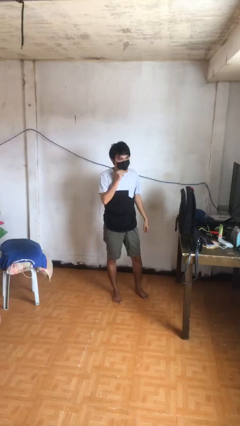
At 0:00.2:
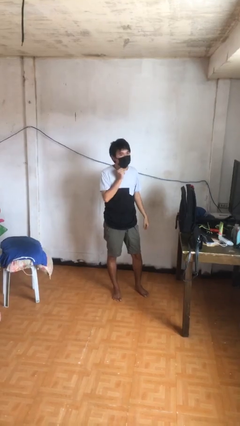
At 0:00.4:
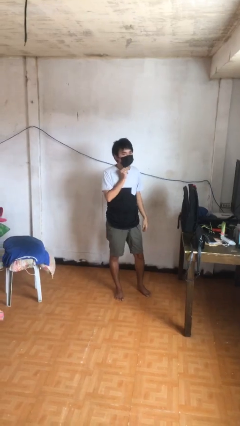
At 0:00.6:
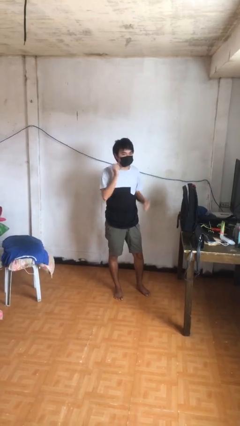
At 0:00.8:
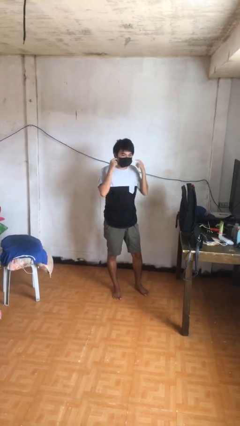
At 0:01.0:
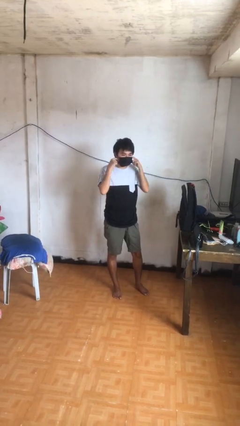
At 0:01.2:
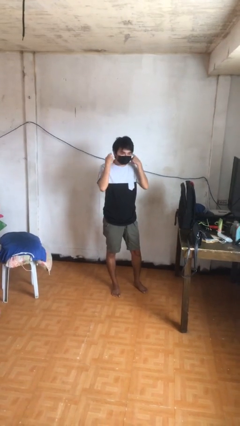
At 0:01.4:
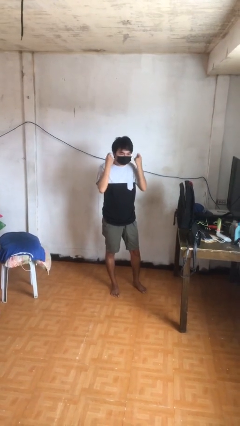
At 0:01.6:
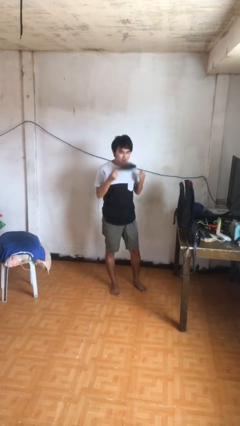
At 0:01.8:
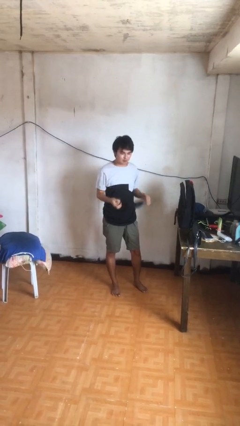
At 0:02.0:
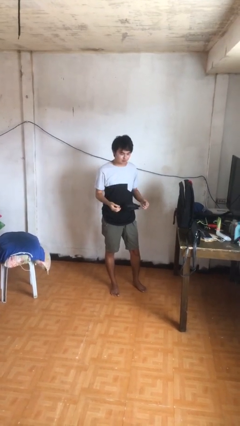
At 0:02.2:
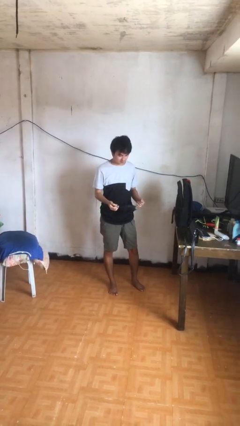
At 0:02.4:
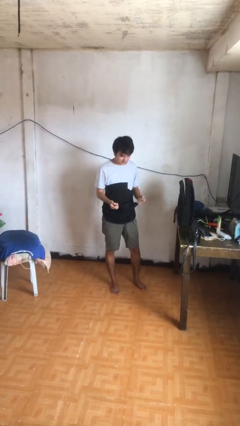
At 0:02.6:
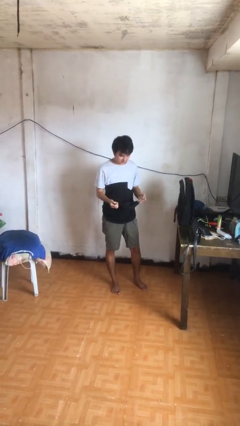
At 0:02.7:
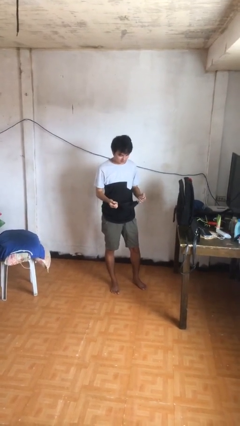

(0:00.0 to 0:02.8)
person takes off facemask

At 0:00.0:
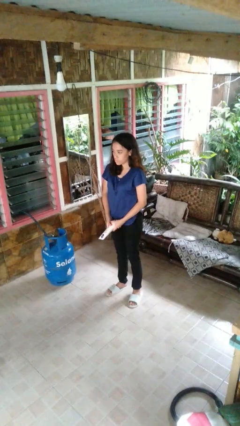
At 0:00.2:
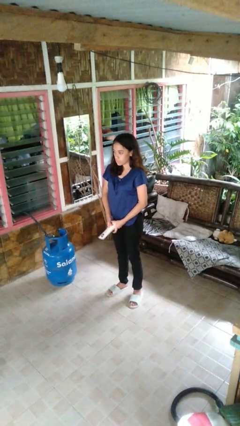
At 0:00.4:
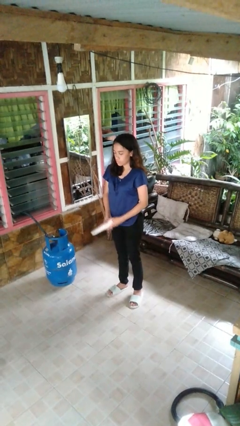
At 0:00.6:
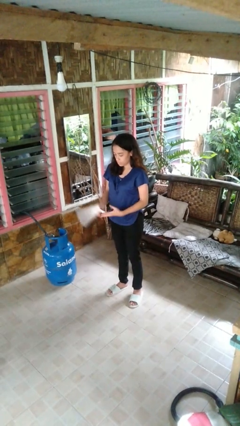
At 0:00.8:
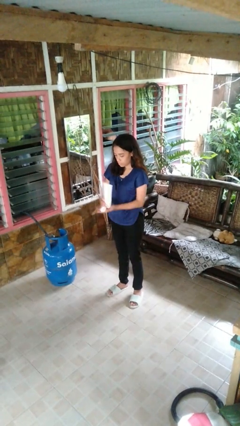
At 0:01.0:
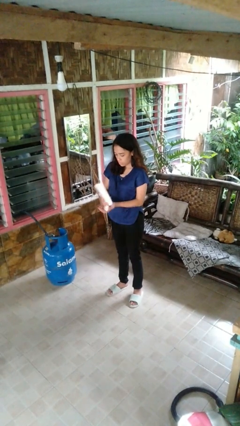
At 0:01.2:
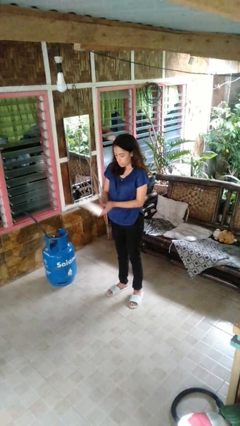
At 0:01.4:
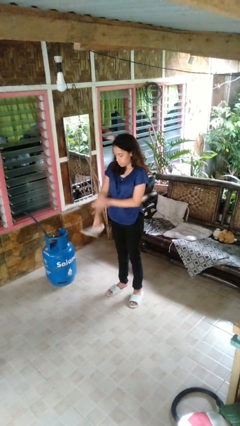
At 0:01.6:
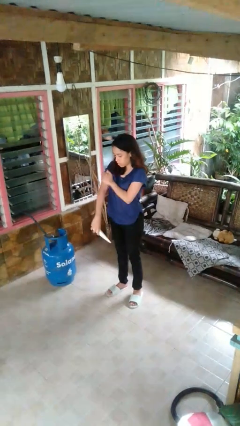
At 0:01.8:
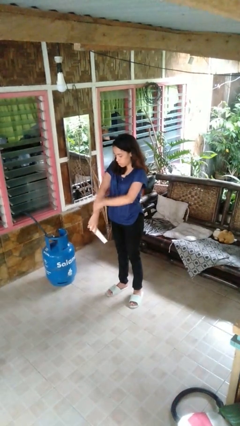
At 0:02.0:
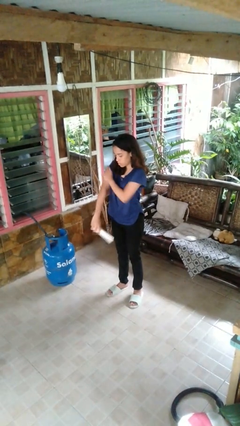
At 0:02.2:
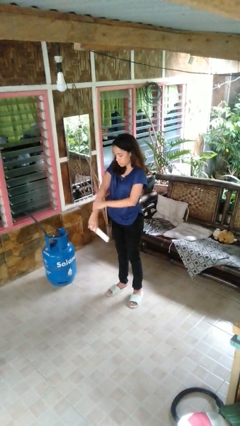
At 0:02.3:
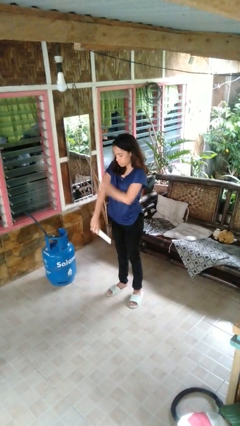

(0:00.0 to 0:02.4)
person applies sunscreen

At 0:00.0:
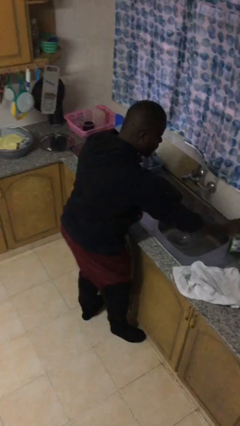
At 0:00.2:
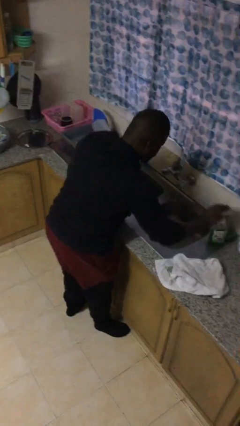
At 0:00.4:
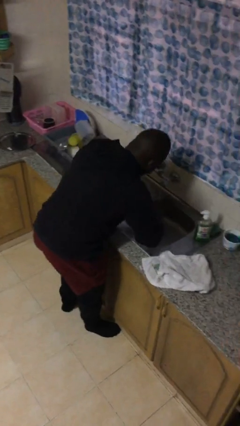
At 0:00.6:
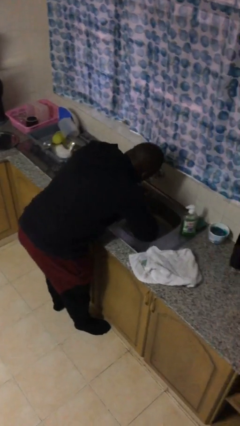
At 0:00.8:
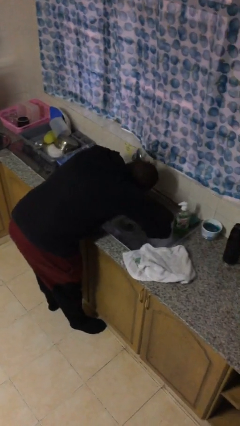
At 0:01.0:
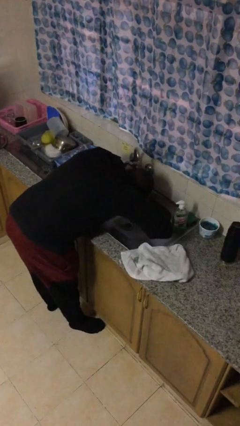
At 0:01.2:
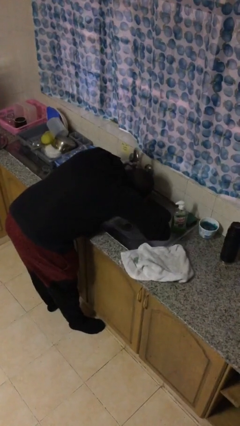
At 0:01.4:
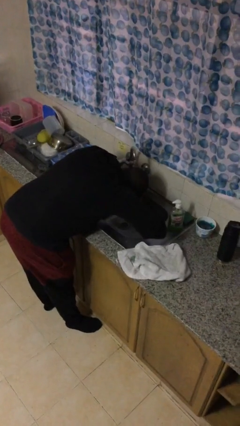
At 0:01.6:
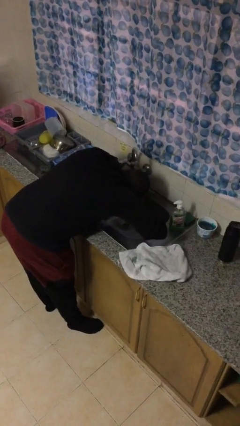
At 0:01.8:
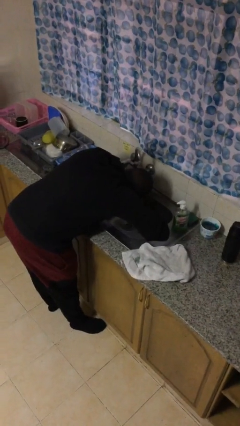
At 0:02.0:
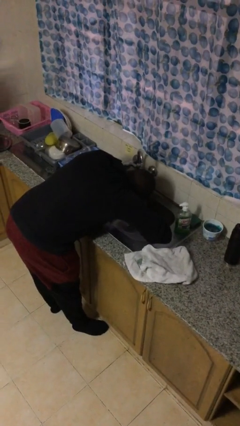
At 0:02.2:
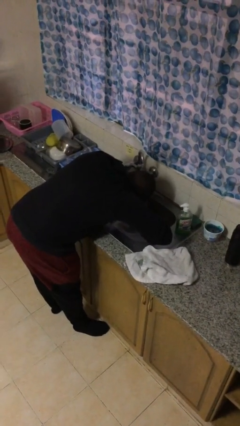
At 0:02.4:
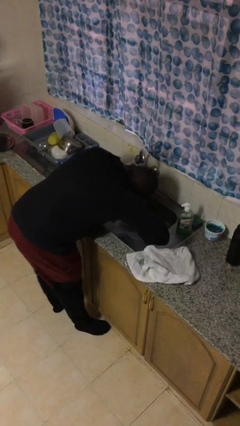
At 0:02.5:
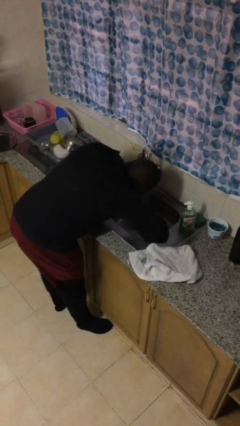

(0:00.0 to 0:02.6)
person washes face

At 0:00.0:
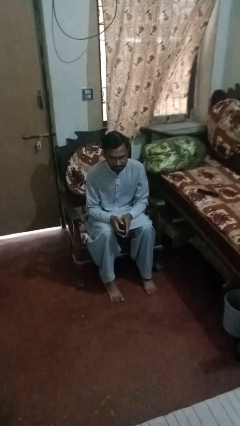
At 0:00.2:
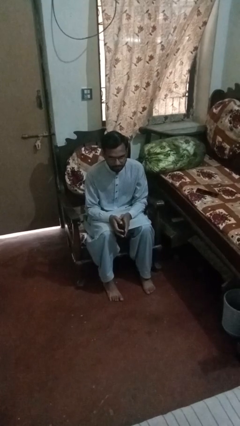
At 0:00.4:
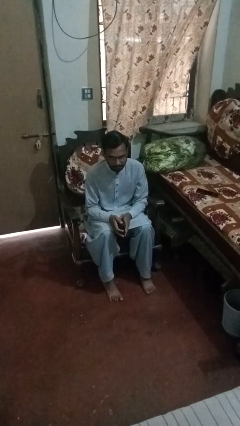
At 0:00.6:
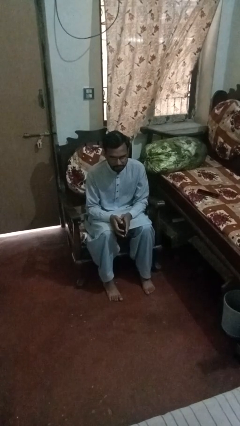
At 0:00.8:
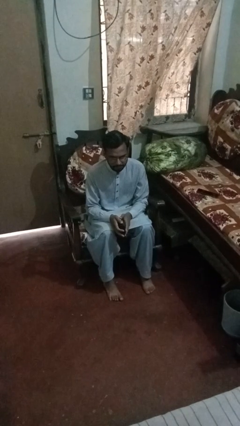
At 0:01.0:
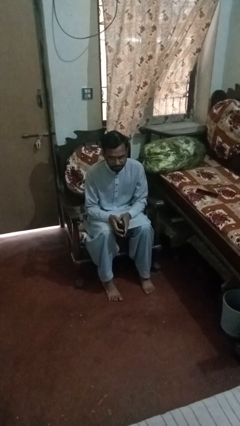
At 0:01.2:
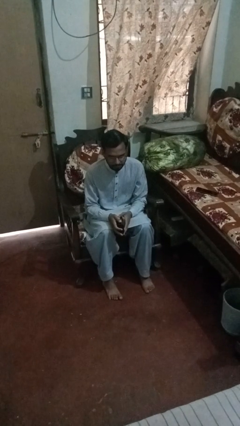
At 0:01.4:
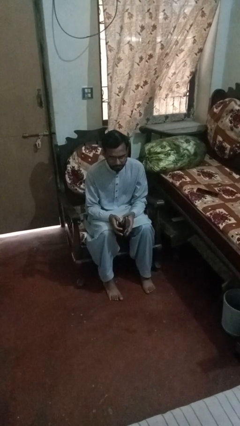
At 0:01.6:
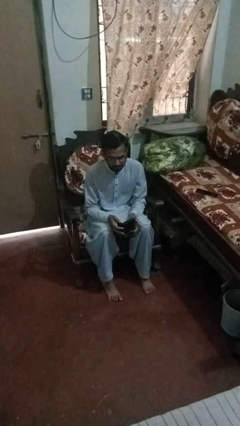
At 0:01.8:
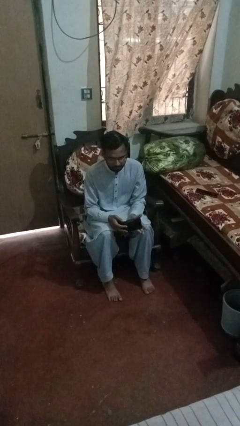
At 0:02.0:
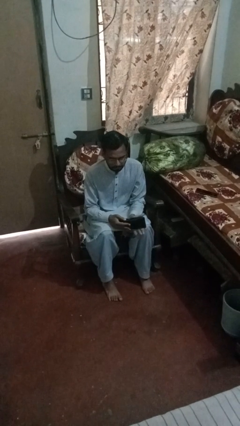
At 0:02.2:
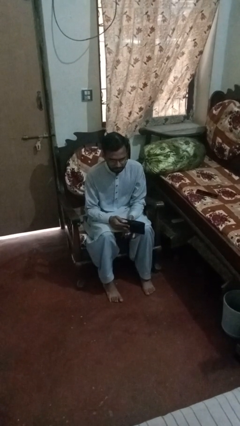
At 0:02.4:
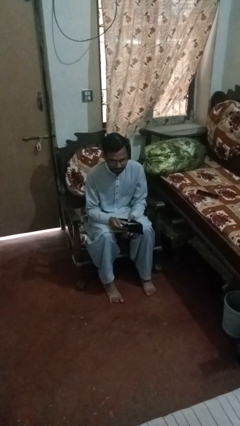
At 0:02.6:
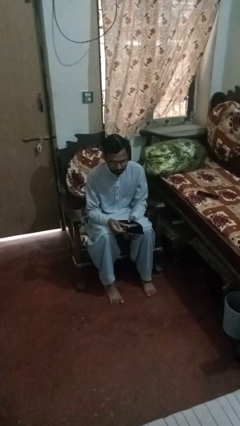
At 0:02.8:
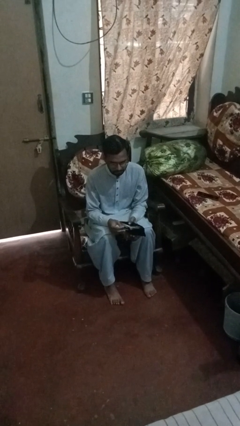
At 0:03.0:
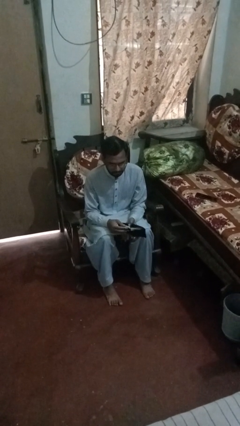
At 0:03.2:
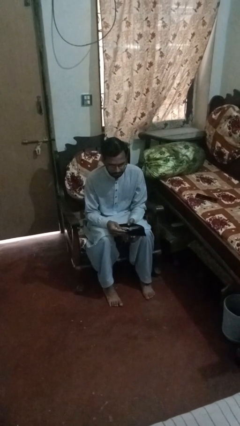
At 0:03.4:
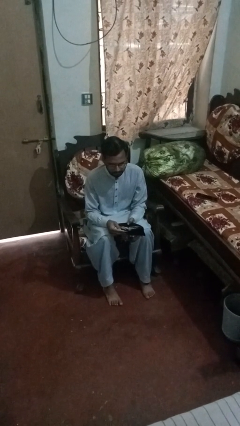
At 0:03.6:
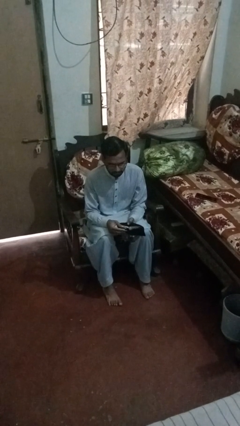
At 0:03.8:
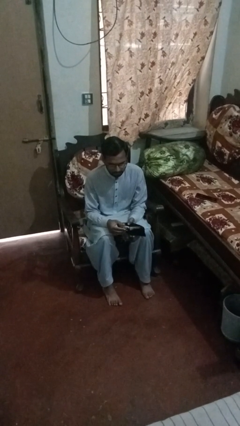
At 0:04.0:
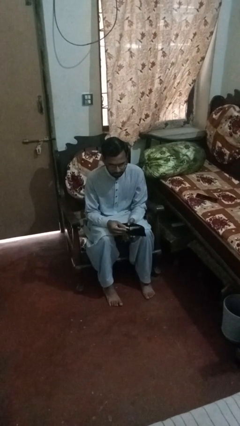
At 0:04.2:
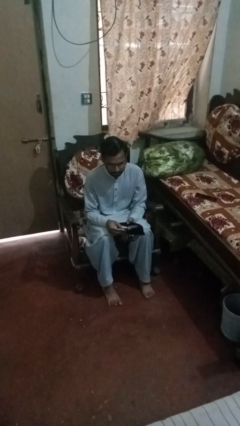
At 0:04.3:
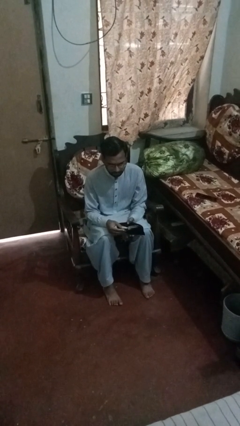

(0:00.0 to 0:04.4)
person searches in purse

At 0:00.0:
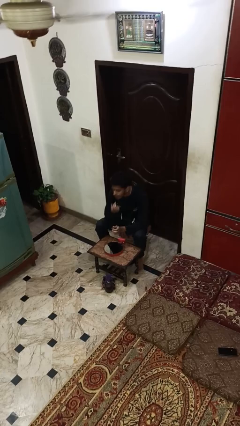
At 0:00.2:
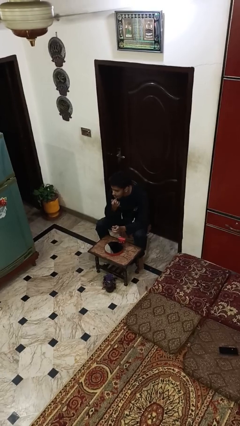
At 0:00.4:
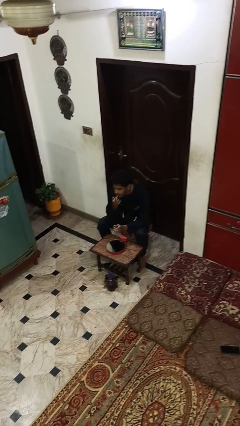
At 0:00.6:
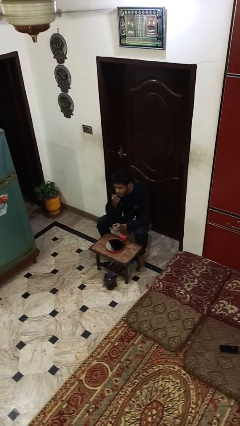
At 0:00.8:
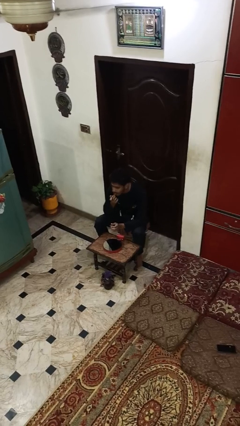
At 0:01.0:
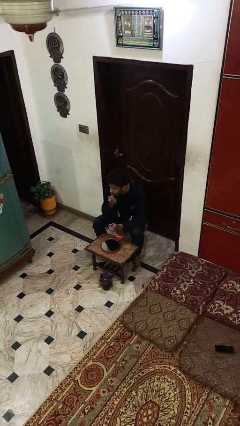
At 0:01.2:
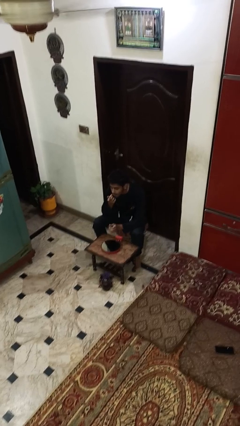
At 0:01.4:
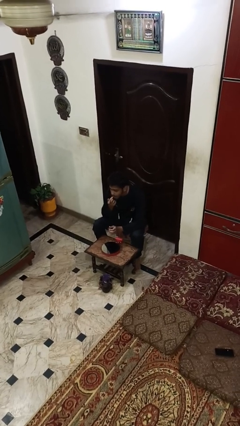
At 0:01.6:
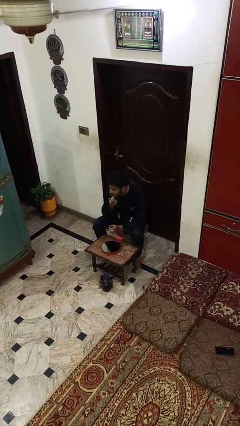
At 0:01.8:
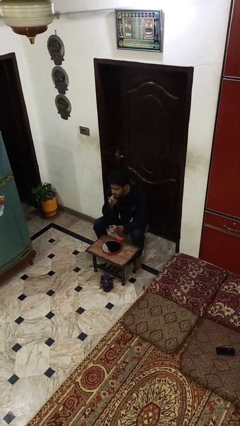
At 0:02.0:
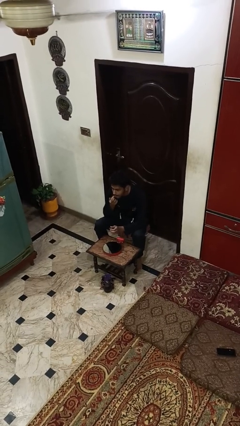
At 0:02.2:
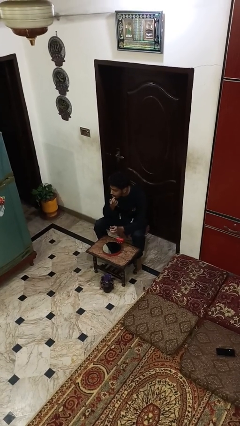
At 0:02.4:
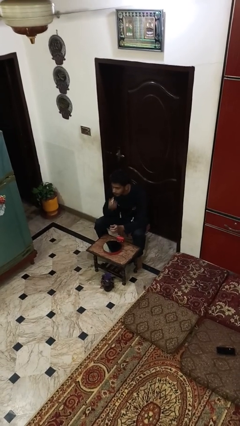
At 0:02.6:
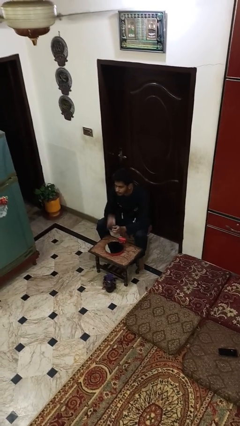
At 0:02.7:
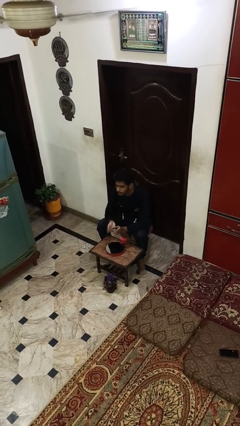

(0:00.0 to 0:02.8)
person applies lip makeup

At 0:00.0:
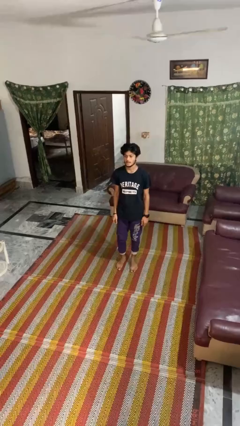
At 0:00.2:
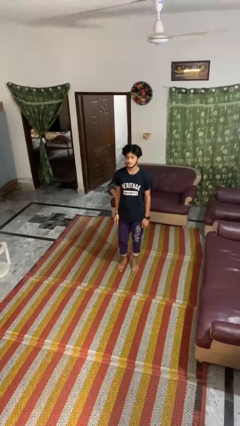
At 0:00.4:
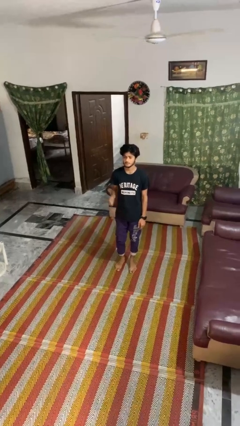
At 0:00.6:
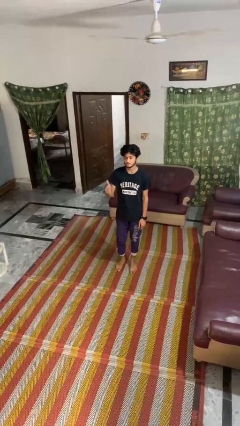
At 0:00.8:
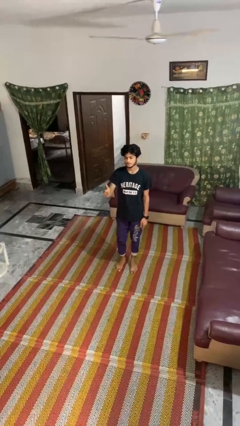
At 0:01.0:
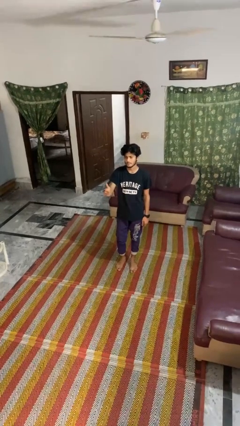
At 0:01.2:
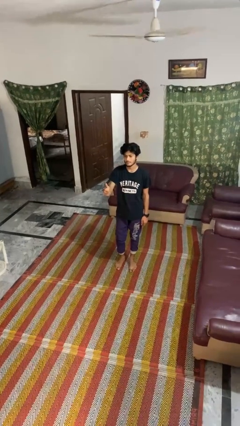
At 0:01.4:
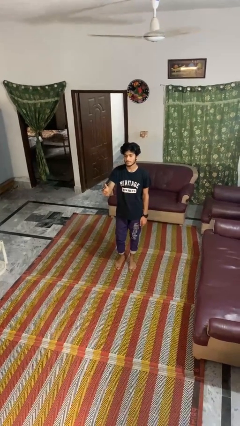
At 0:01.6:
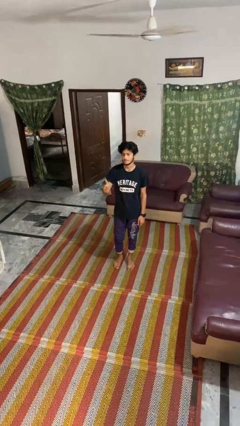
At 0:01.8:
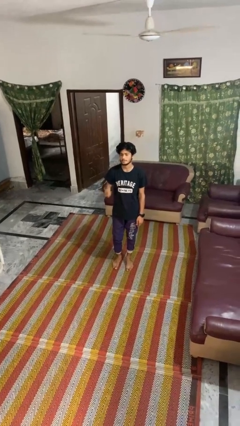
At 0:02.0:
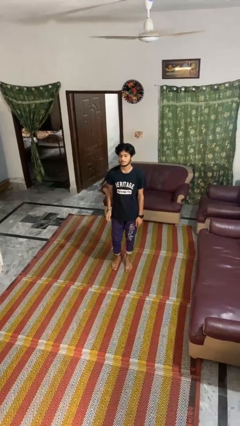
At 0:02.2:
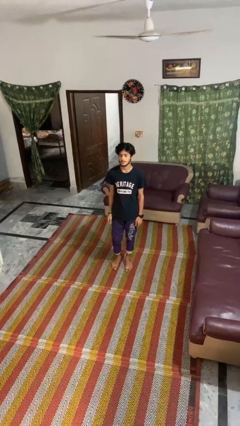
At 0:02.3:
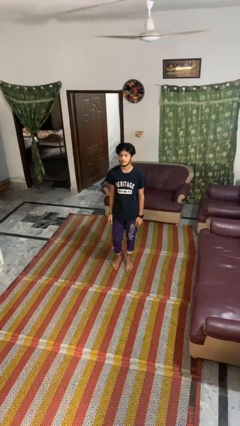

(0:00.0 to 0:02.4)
person gestures thumbs up
